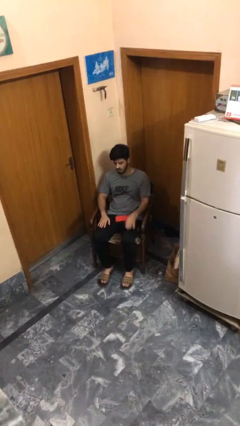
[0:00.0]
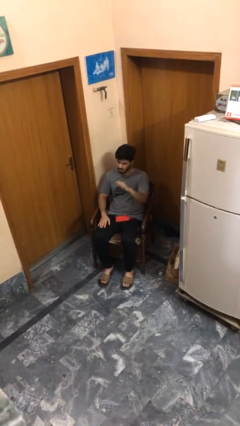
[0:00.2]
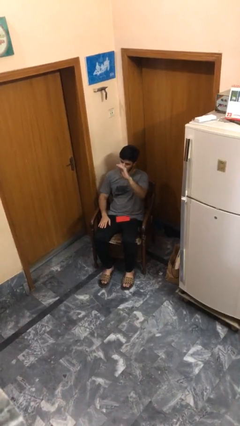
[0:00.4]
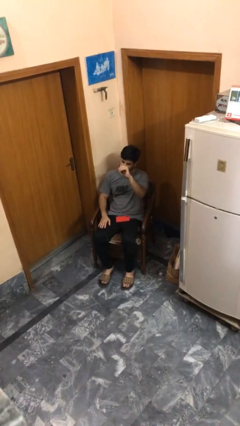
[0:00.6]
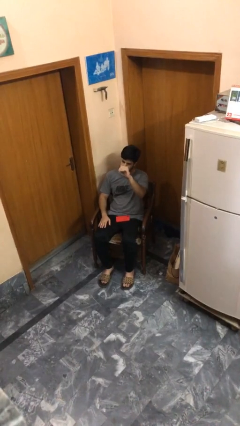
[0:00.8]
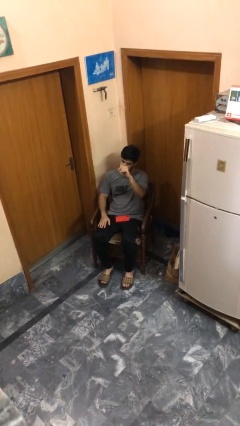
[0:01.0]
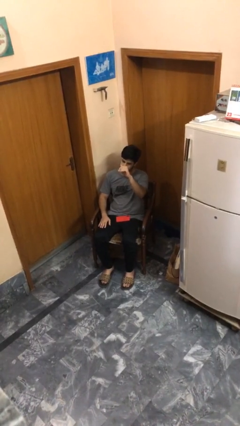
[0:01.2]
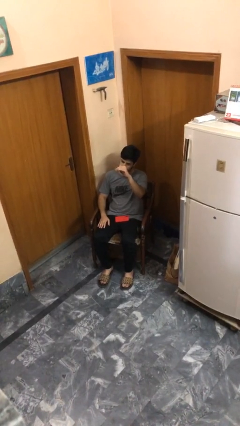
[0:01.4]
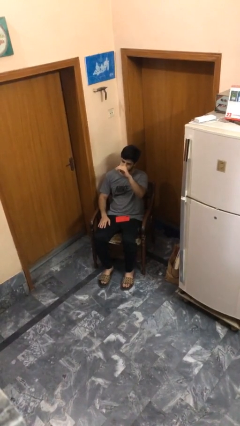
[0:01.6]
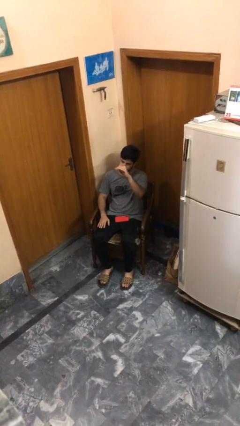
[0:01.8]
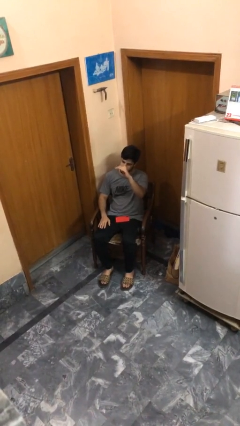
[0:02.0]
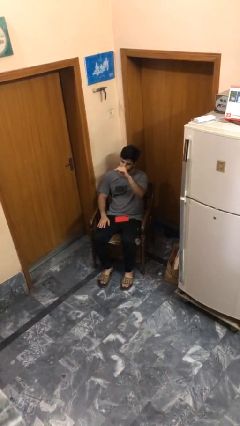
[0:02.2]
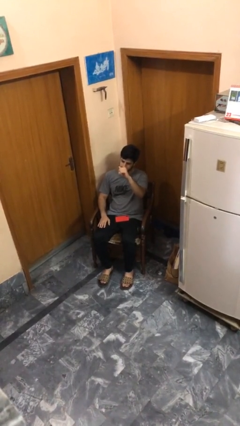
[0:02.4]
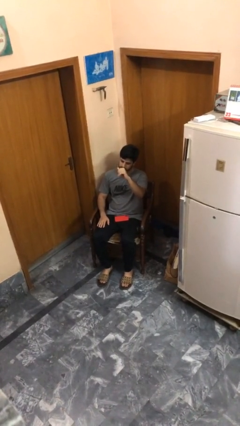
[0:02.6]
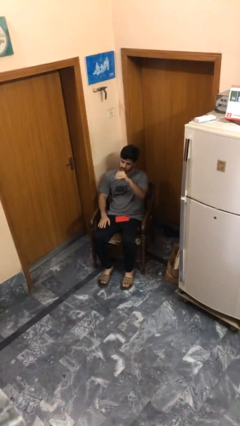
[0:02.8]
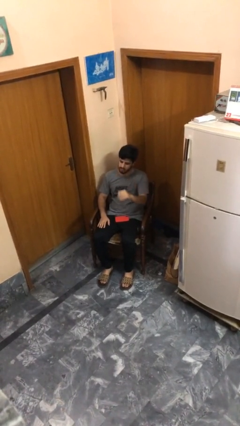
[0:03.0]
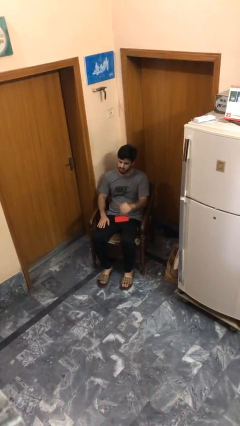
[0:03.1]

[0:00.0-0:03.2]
person gestures come here

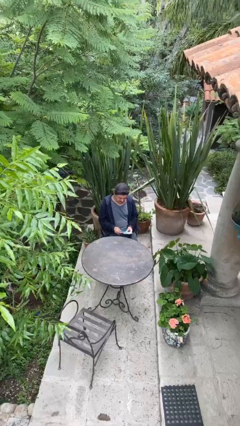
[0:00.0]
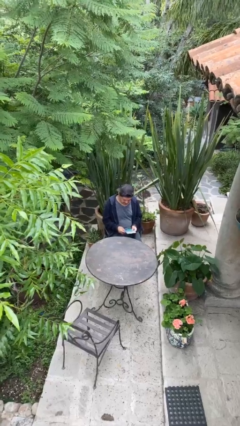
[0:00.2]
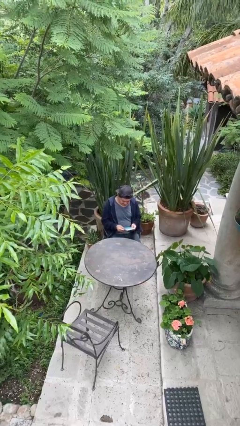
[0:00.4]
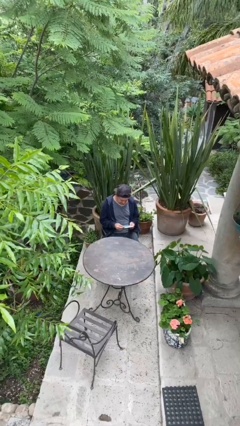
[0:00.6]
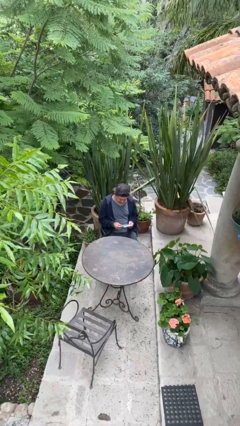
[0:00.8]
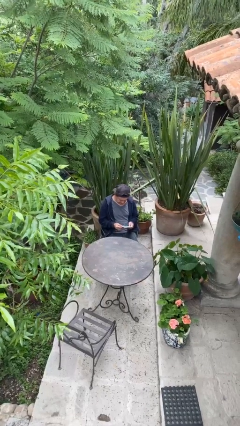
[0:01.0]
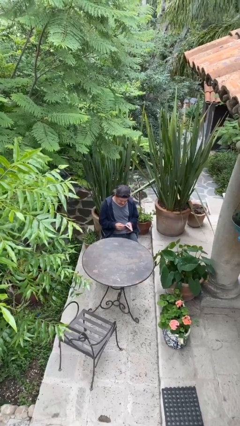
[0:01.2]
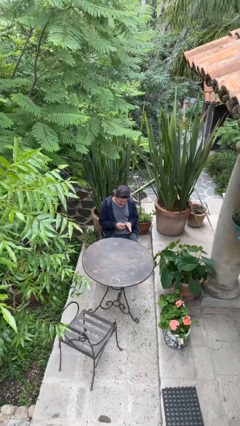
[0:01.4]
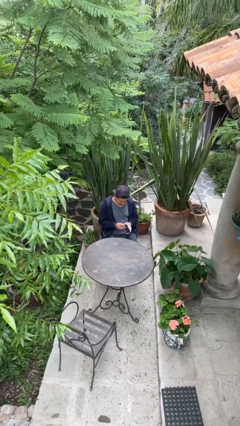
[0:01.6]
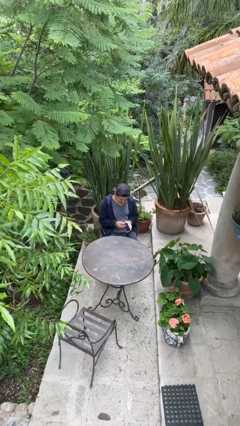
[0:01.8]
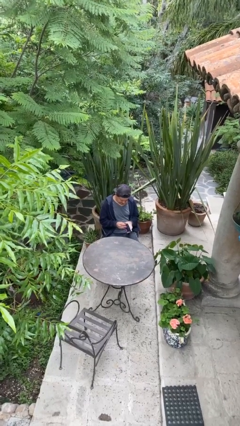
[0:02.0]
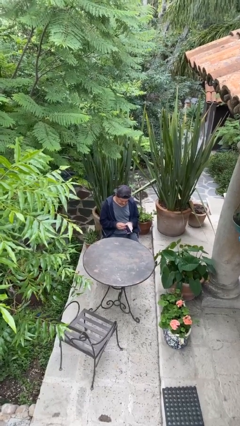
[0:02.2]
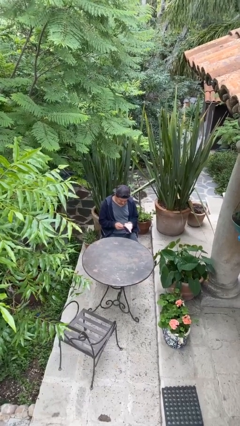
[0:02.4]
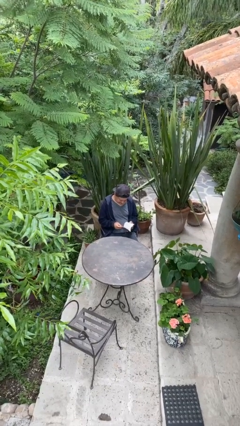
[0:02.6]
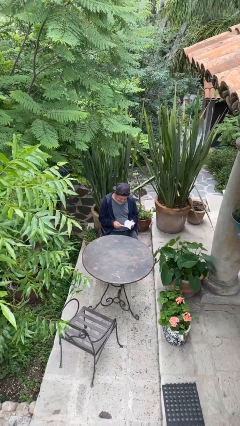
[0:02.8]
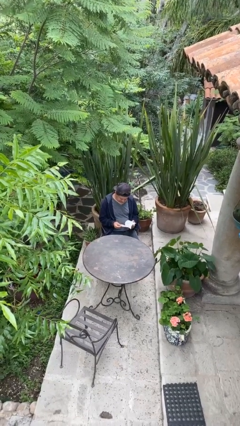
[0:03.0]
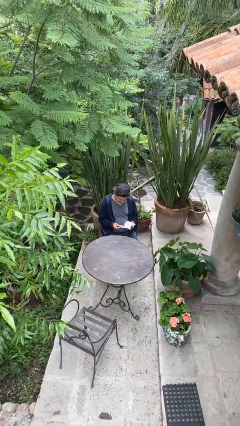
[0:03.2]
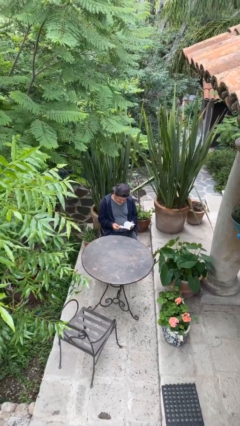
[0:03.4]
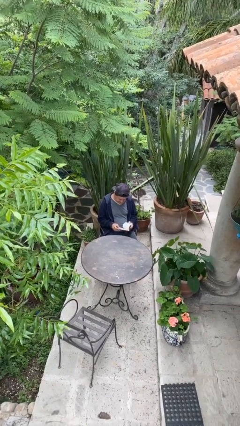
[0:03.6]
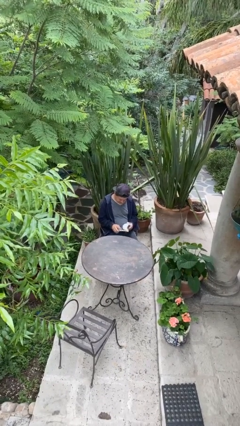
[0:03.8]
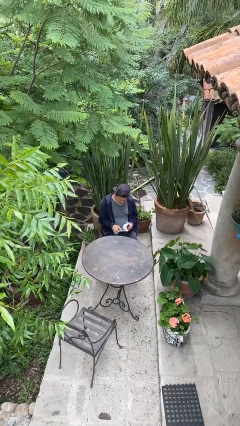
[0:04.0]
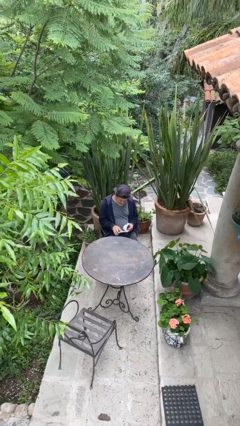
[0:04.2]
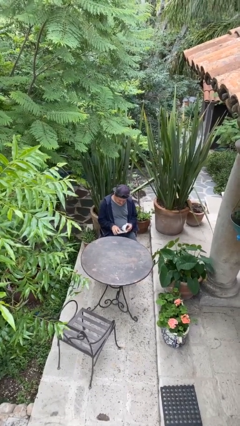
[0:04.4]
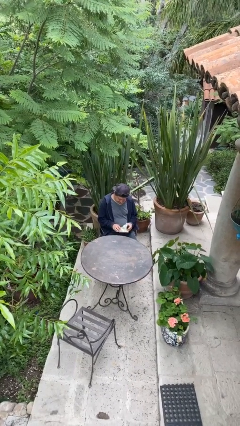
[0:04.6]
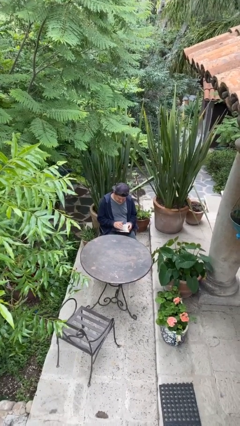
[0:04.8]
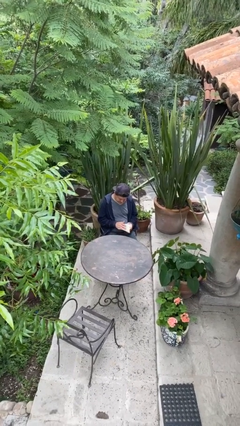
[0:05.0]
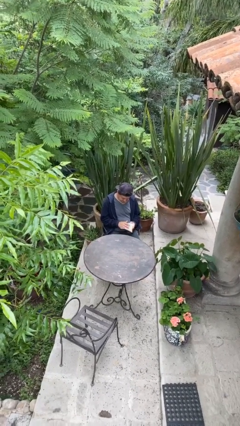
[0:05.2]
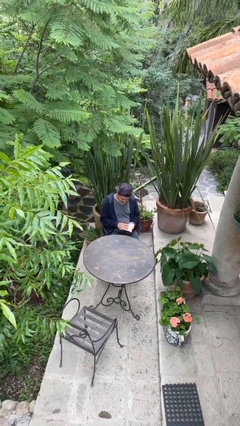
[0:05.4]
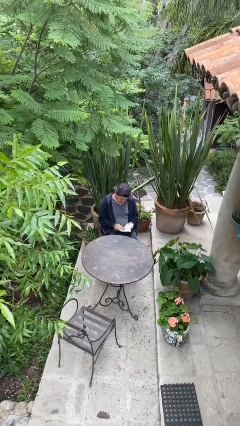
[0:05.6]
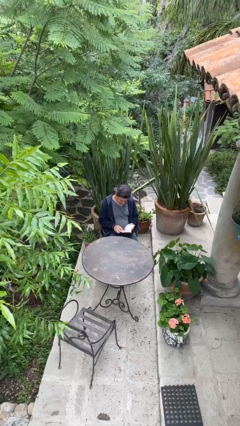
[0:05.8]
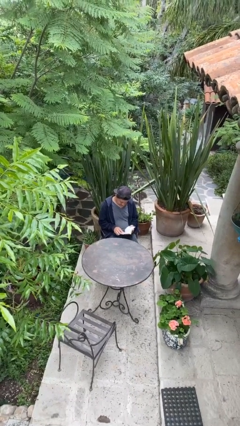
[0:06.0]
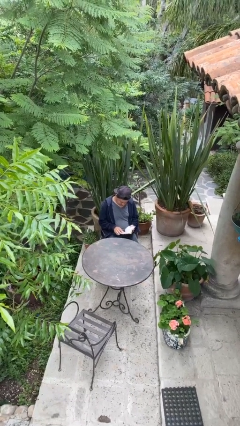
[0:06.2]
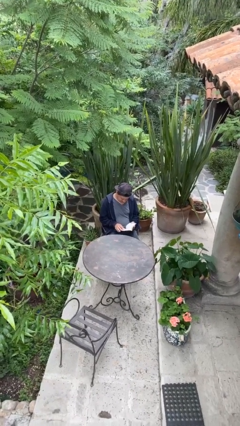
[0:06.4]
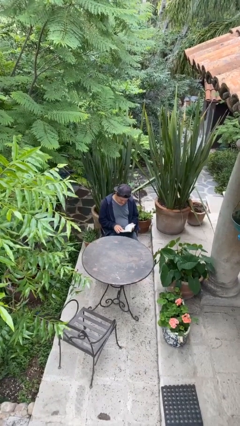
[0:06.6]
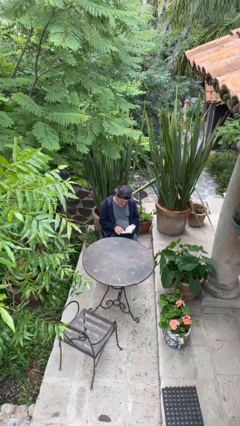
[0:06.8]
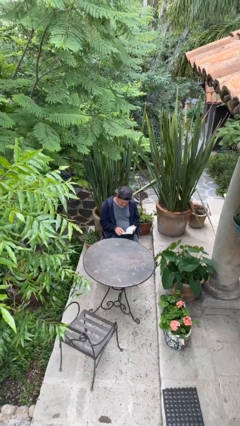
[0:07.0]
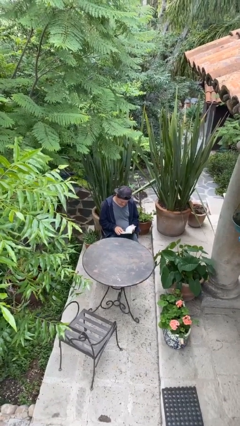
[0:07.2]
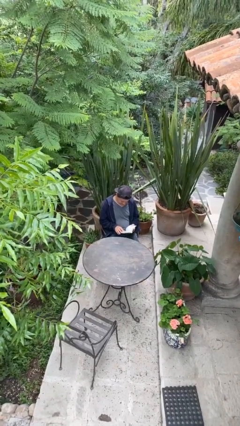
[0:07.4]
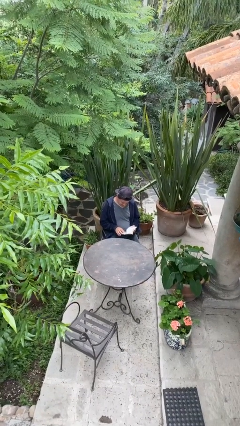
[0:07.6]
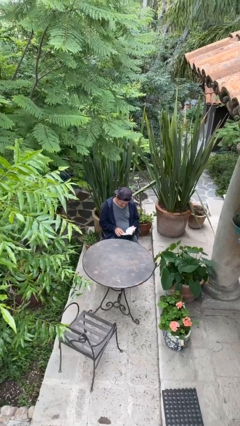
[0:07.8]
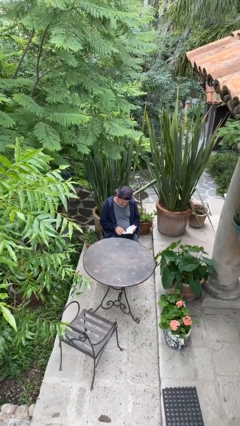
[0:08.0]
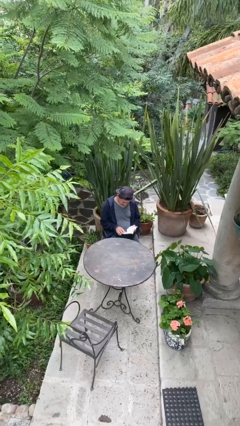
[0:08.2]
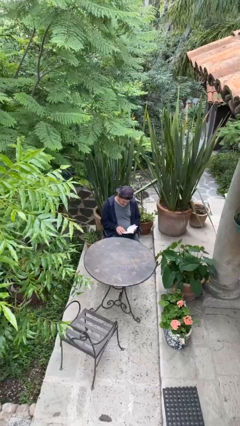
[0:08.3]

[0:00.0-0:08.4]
person reads document

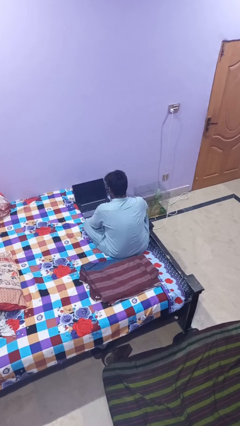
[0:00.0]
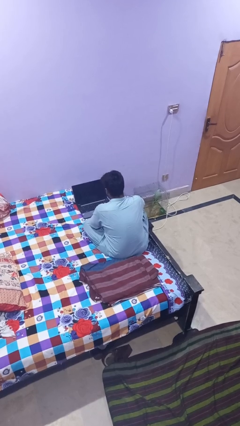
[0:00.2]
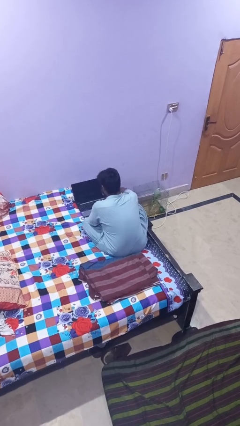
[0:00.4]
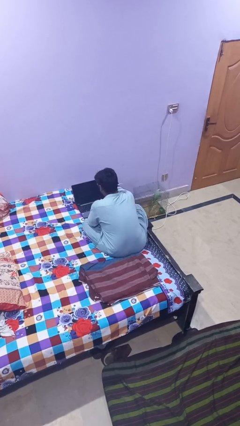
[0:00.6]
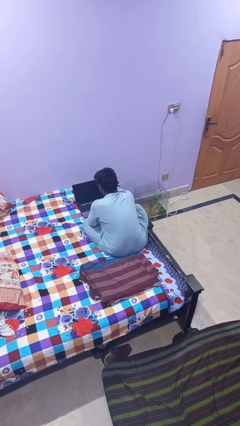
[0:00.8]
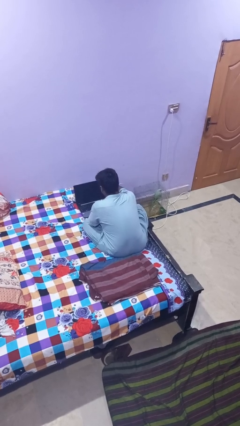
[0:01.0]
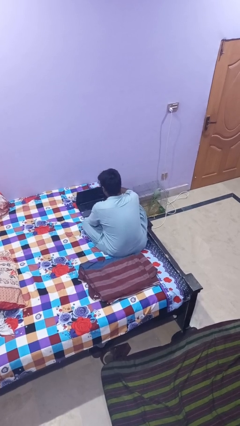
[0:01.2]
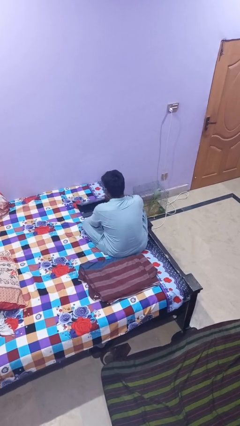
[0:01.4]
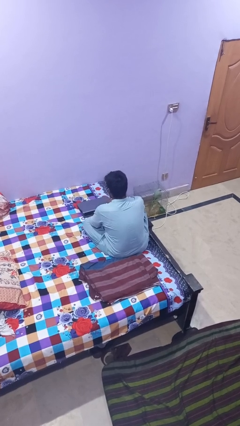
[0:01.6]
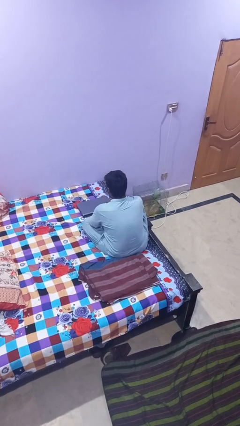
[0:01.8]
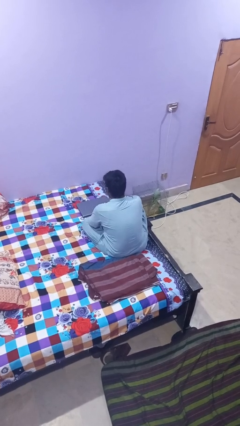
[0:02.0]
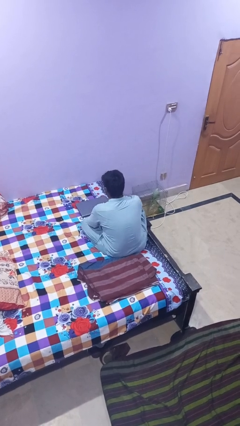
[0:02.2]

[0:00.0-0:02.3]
person closes laptop

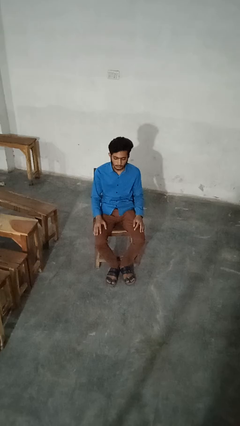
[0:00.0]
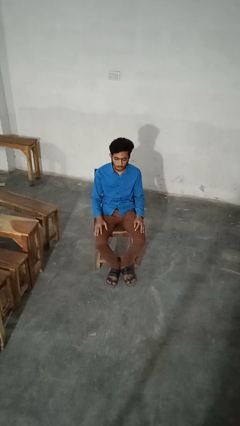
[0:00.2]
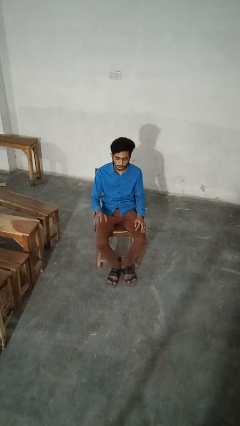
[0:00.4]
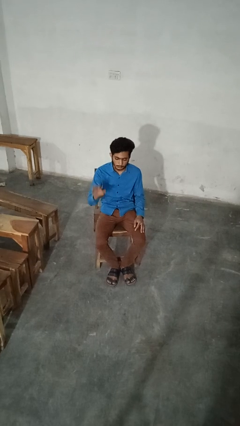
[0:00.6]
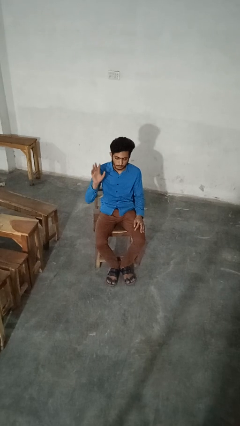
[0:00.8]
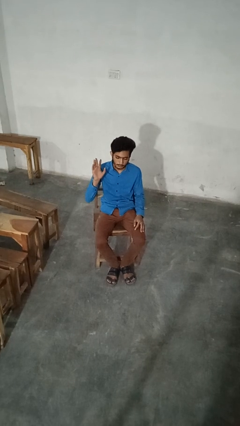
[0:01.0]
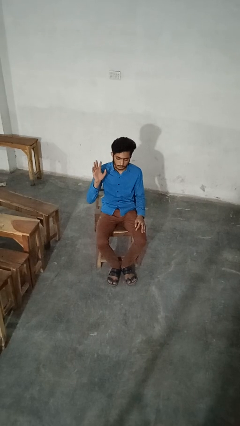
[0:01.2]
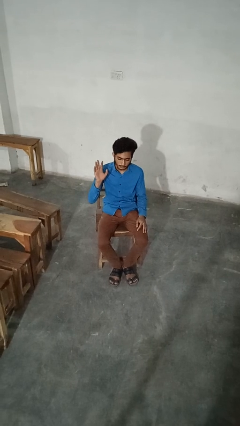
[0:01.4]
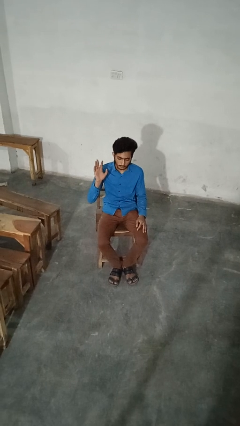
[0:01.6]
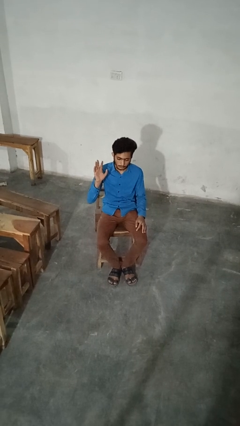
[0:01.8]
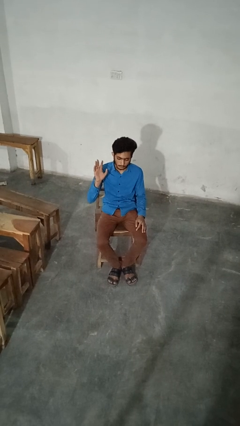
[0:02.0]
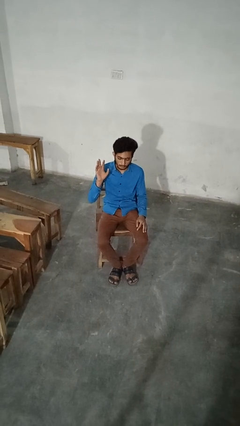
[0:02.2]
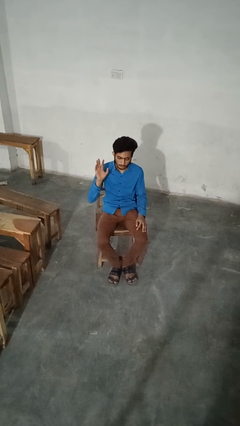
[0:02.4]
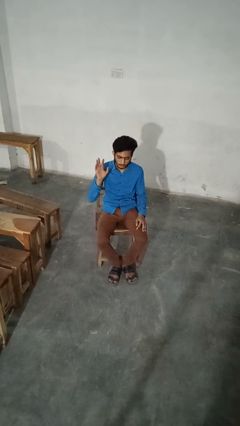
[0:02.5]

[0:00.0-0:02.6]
person gestures raise hand

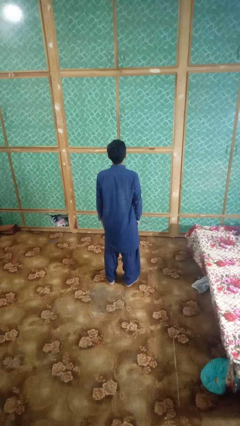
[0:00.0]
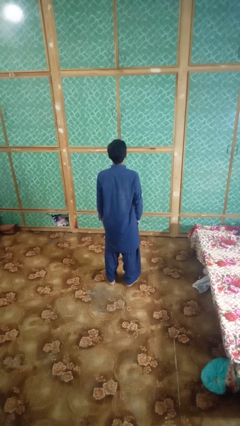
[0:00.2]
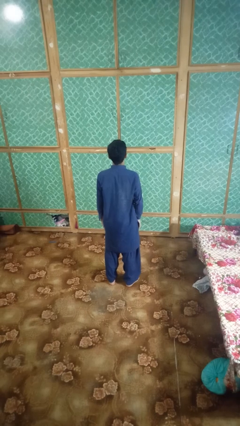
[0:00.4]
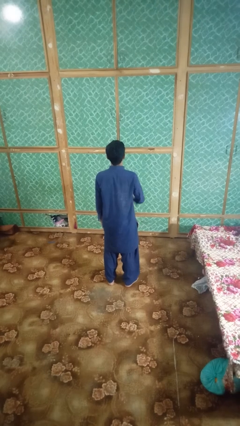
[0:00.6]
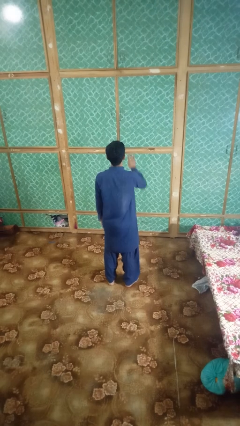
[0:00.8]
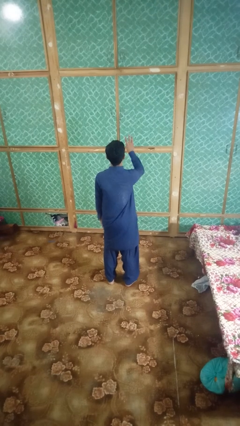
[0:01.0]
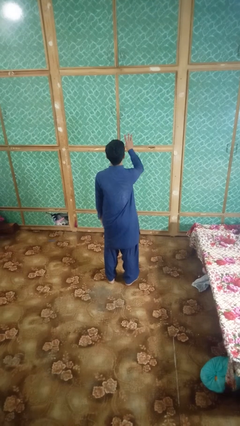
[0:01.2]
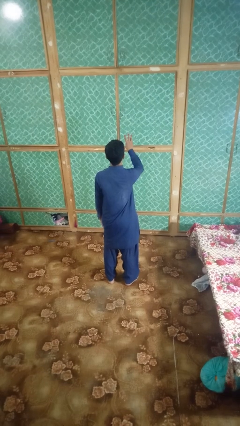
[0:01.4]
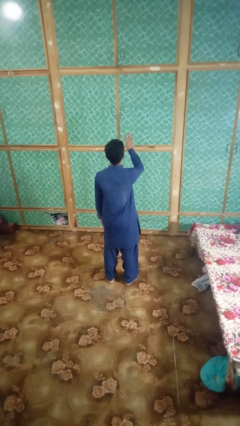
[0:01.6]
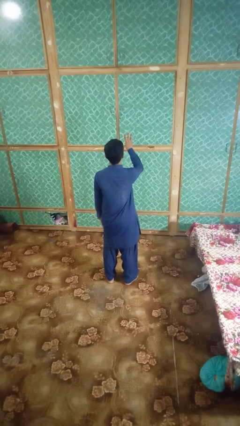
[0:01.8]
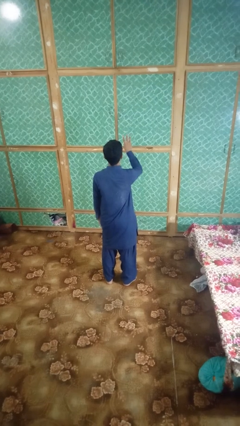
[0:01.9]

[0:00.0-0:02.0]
person gestures number three
